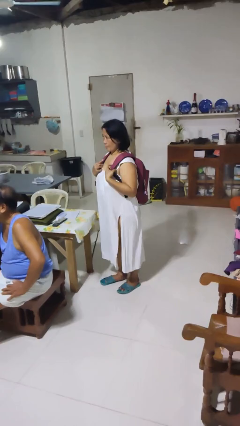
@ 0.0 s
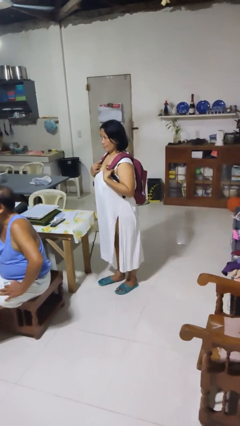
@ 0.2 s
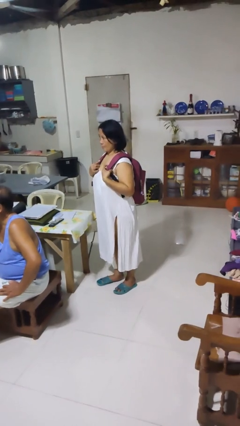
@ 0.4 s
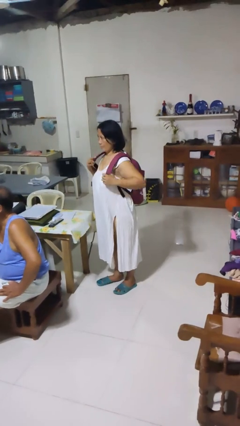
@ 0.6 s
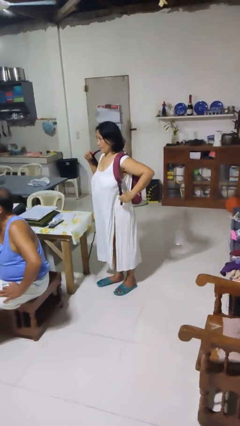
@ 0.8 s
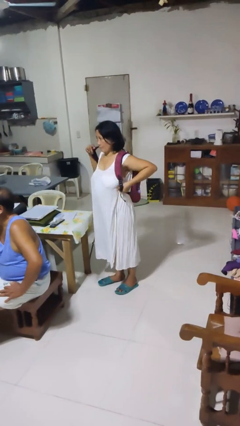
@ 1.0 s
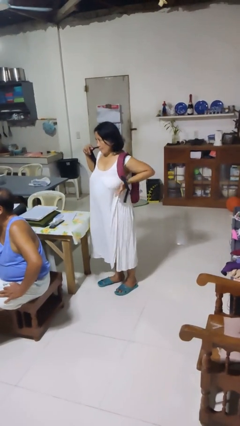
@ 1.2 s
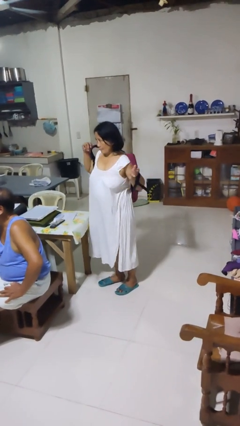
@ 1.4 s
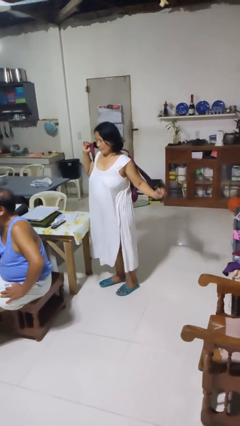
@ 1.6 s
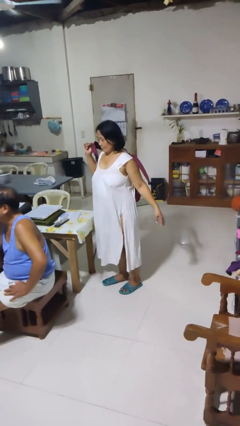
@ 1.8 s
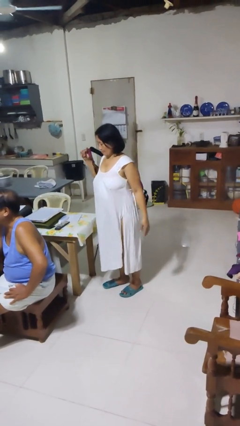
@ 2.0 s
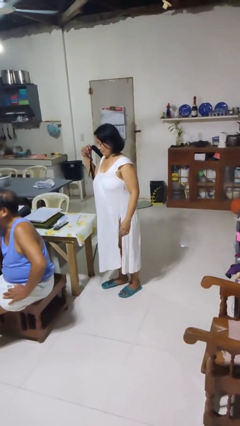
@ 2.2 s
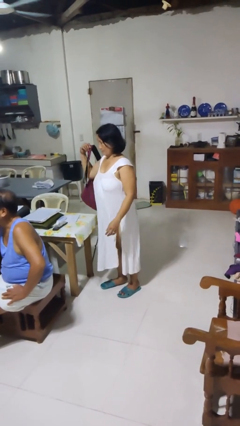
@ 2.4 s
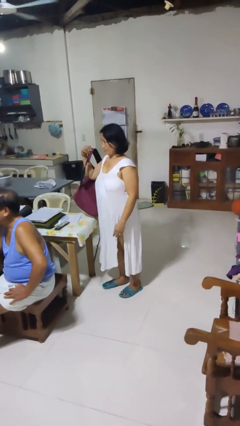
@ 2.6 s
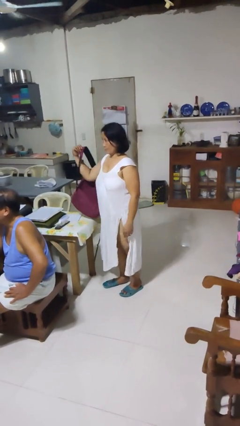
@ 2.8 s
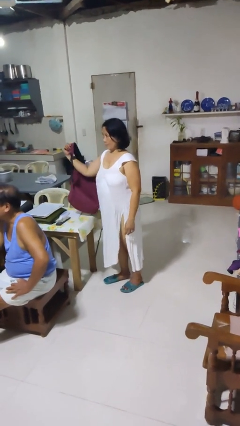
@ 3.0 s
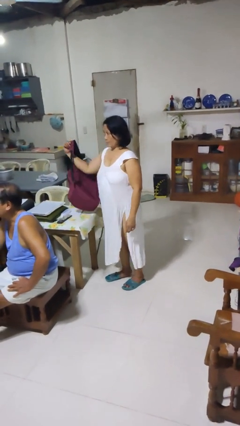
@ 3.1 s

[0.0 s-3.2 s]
person takes off backpack

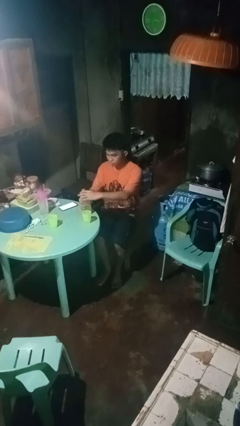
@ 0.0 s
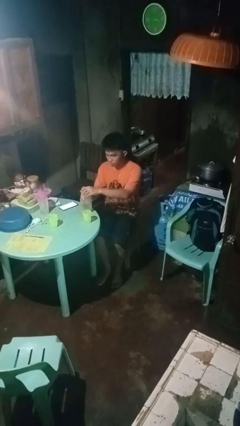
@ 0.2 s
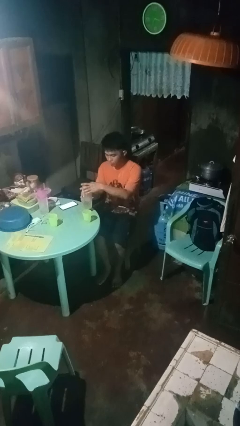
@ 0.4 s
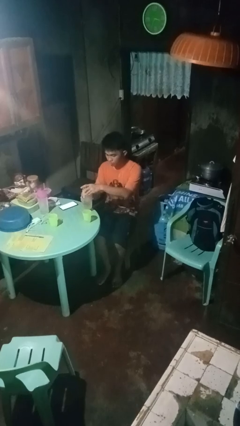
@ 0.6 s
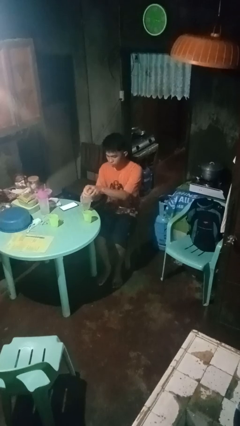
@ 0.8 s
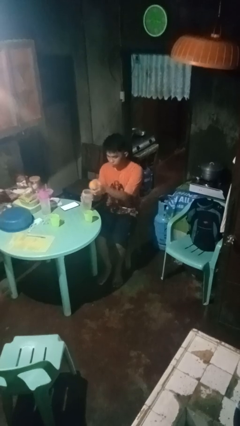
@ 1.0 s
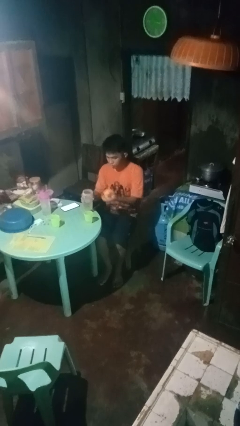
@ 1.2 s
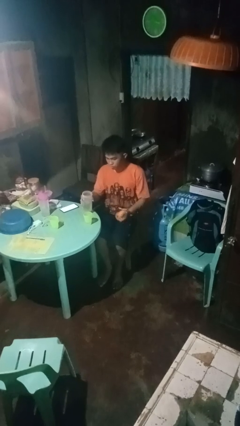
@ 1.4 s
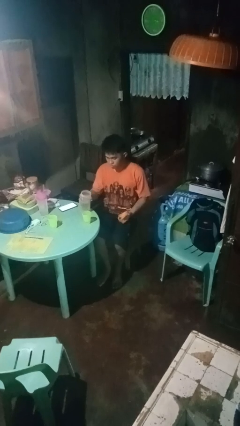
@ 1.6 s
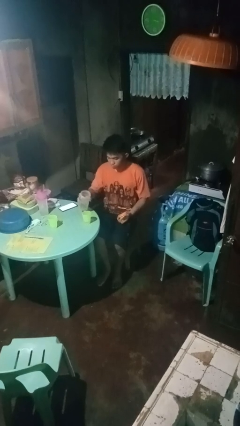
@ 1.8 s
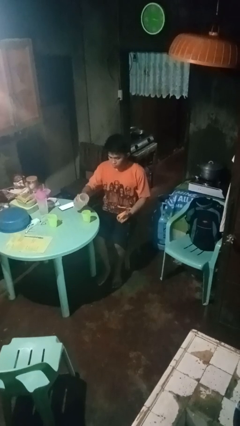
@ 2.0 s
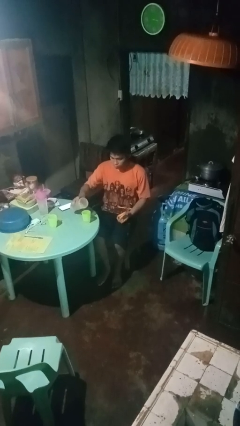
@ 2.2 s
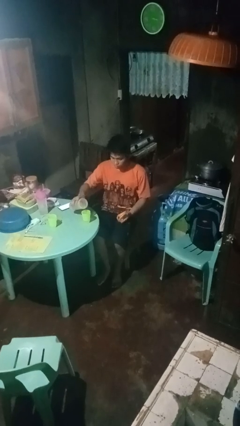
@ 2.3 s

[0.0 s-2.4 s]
person unscrews lid from bottle

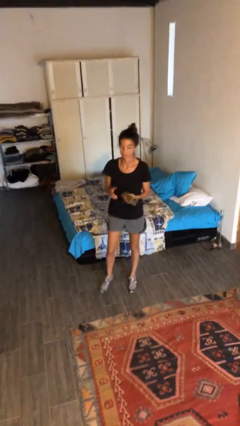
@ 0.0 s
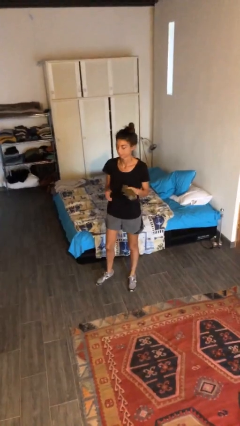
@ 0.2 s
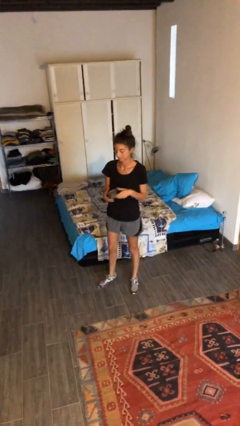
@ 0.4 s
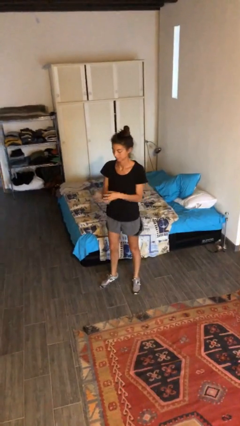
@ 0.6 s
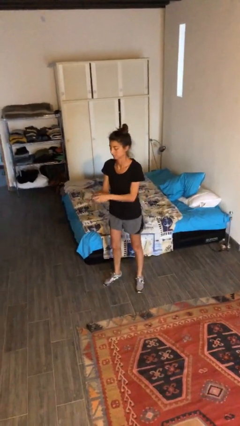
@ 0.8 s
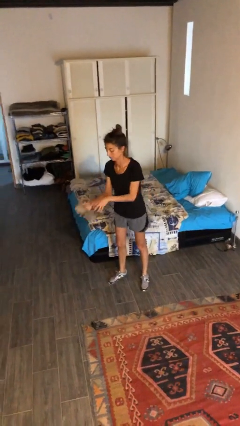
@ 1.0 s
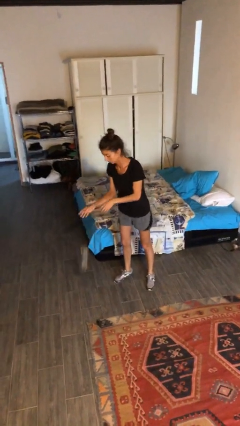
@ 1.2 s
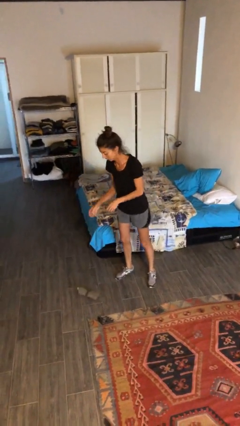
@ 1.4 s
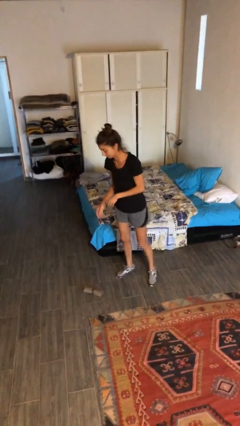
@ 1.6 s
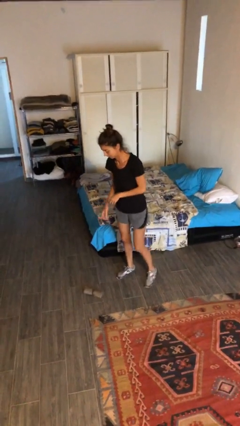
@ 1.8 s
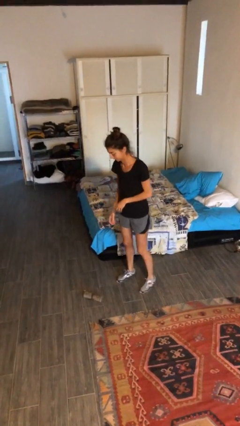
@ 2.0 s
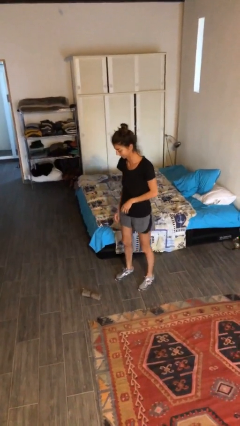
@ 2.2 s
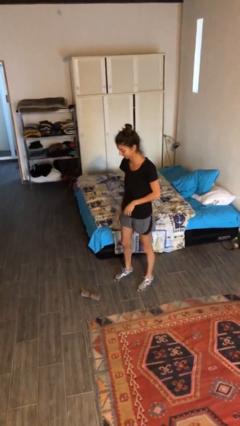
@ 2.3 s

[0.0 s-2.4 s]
person drops object

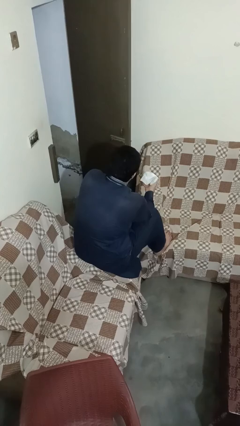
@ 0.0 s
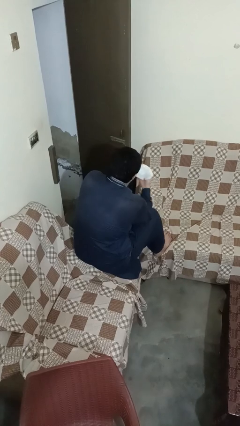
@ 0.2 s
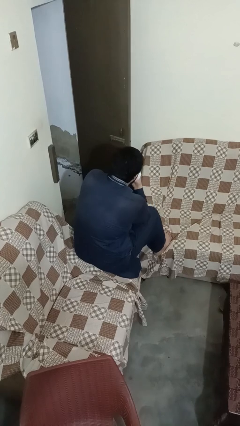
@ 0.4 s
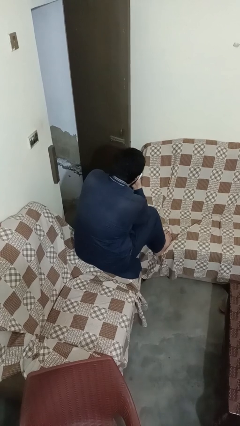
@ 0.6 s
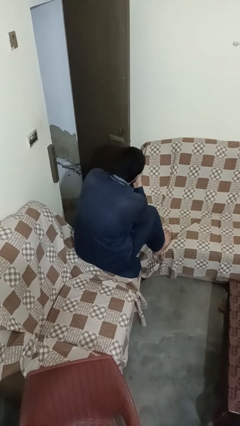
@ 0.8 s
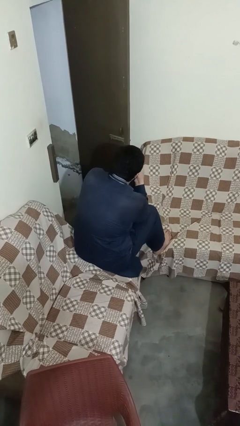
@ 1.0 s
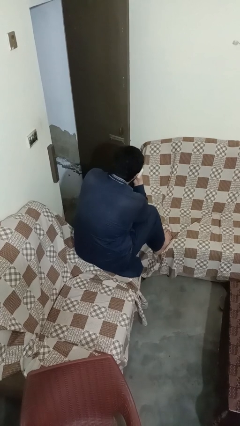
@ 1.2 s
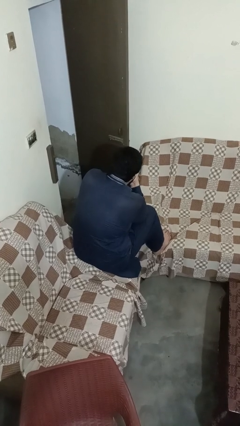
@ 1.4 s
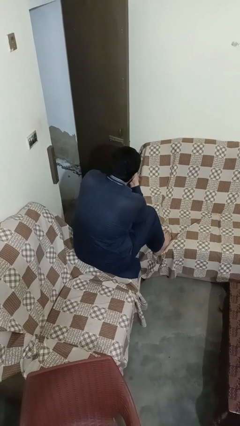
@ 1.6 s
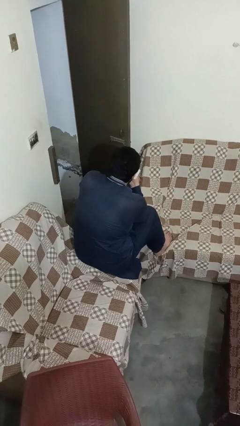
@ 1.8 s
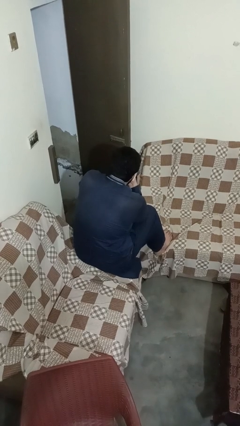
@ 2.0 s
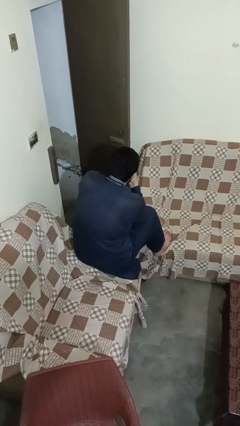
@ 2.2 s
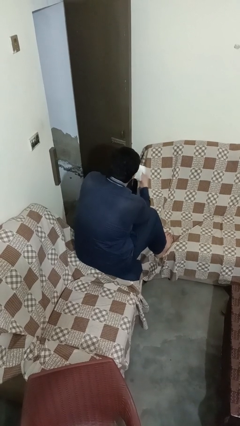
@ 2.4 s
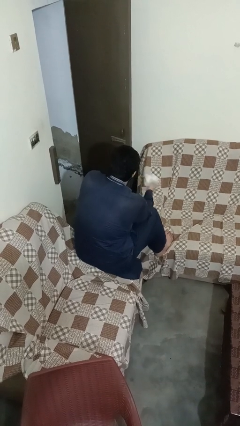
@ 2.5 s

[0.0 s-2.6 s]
person blows nose

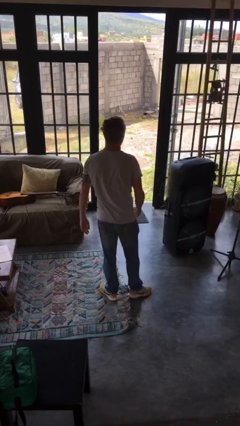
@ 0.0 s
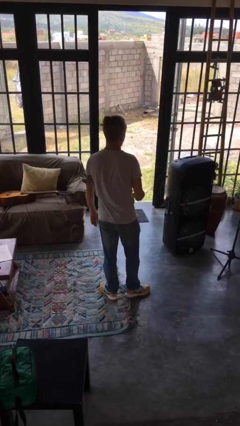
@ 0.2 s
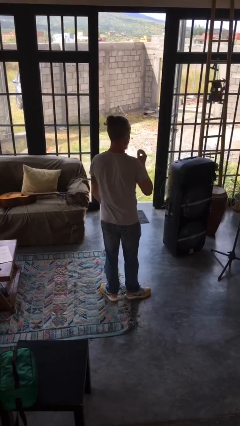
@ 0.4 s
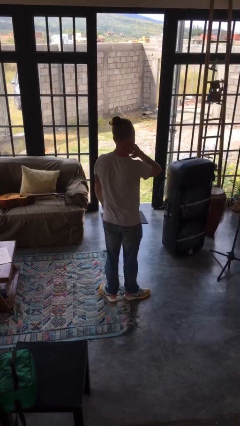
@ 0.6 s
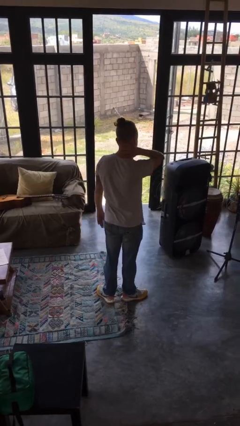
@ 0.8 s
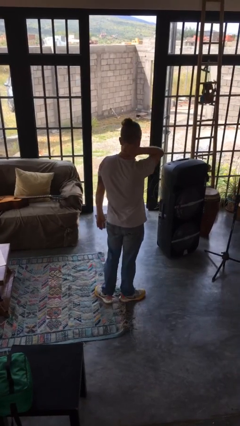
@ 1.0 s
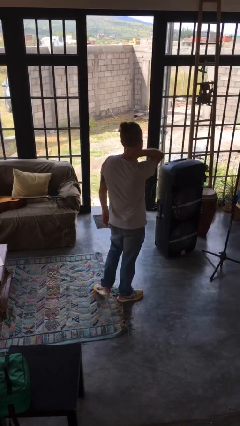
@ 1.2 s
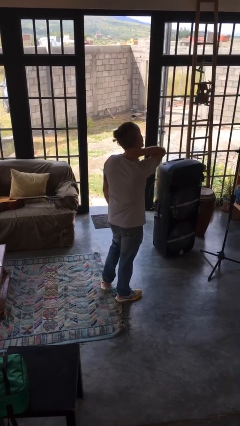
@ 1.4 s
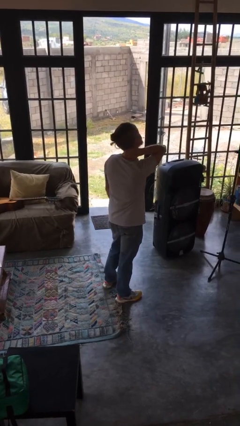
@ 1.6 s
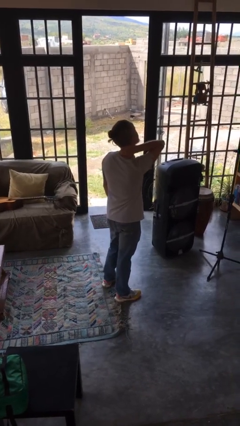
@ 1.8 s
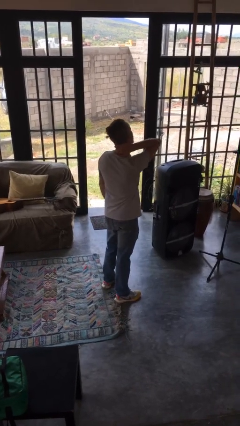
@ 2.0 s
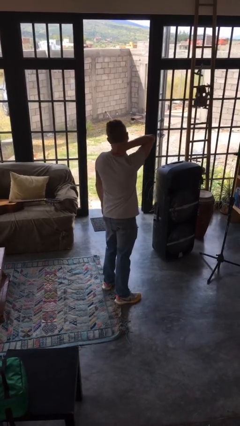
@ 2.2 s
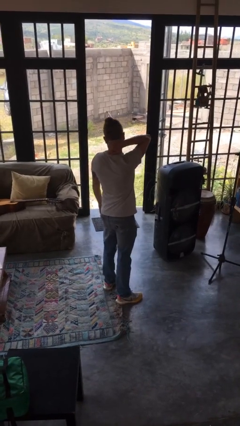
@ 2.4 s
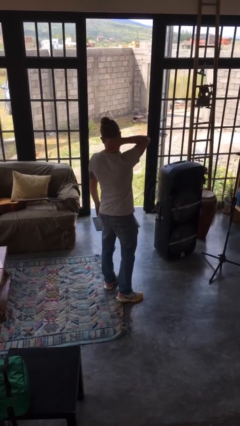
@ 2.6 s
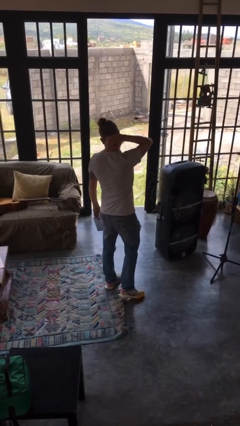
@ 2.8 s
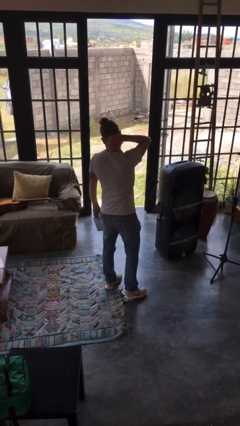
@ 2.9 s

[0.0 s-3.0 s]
person rubs neck

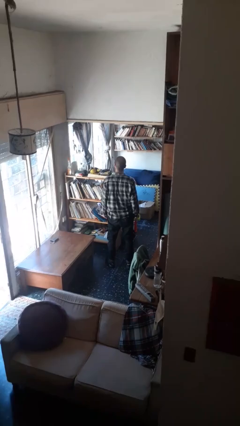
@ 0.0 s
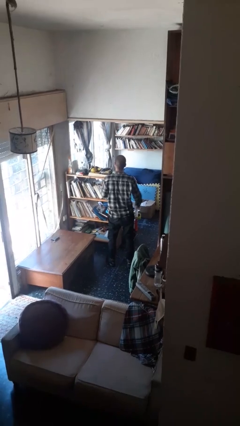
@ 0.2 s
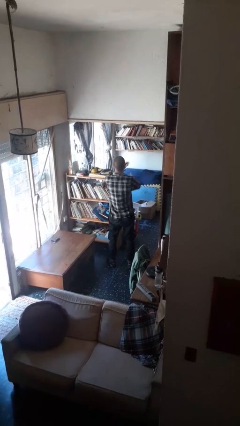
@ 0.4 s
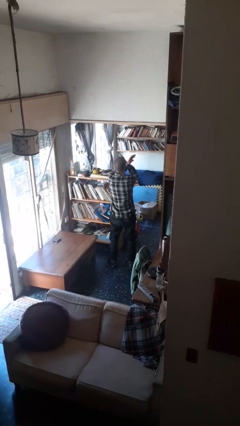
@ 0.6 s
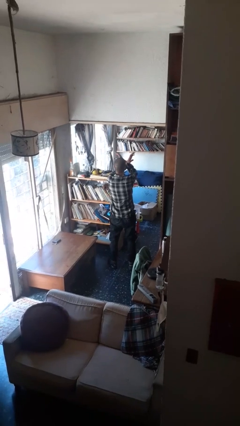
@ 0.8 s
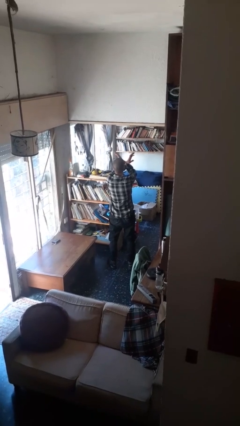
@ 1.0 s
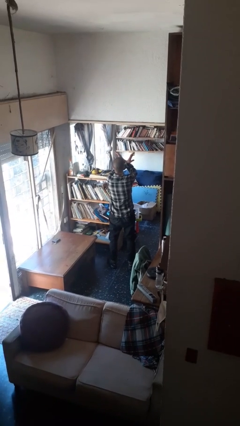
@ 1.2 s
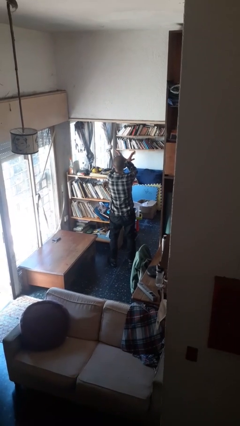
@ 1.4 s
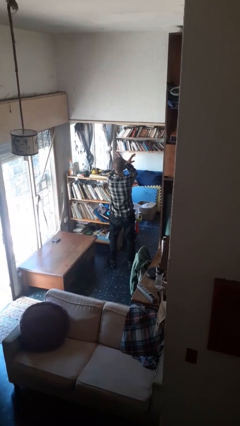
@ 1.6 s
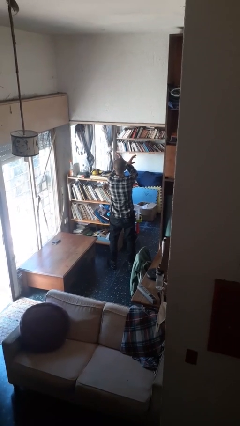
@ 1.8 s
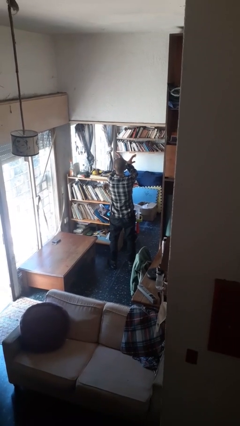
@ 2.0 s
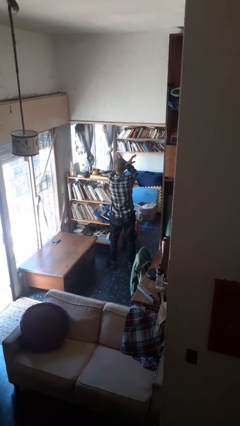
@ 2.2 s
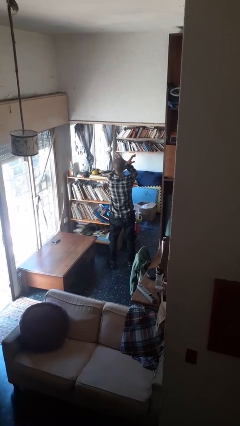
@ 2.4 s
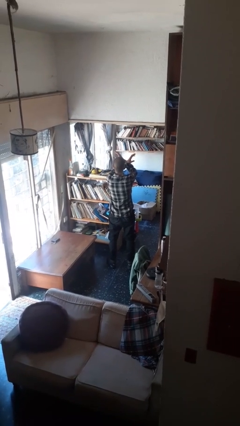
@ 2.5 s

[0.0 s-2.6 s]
person gestures arms x

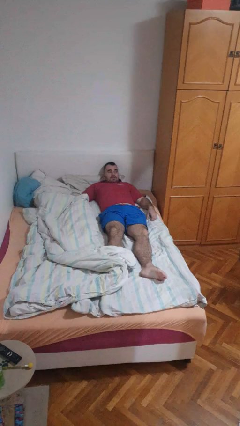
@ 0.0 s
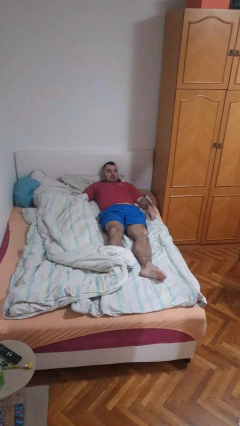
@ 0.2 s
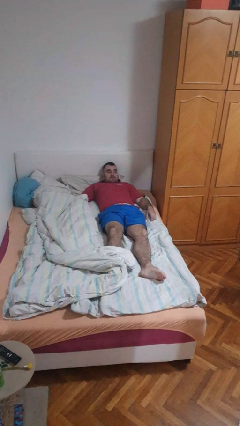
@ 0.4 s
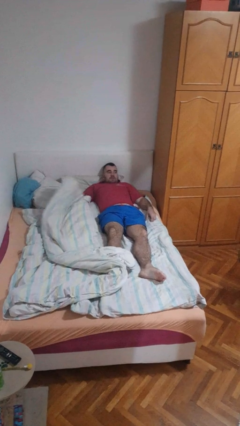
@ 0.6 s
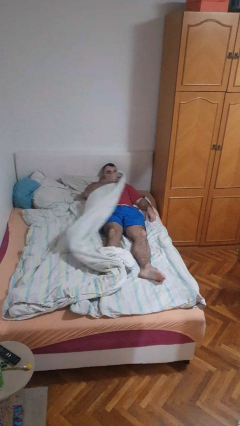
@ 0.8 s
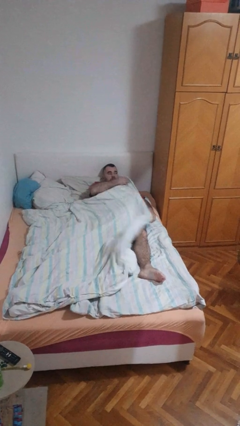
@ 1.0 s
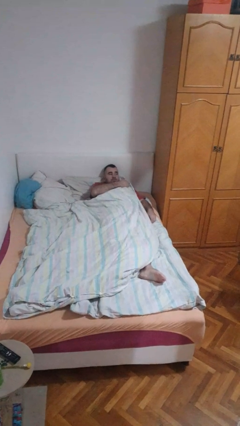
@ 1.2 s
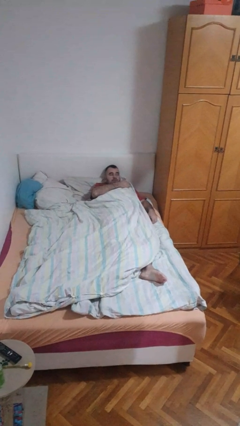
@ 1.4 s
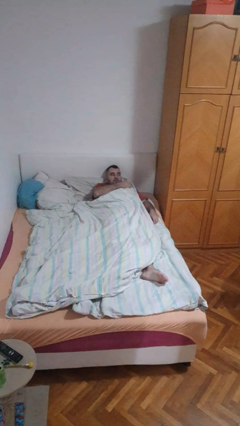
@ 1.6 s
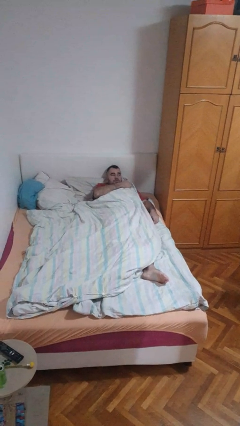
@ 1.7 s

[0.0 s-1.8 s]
person covers with bedsheets
